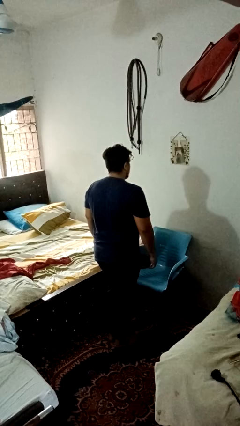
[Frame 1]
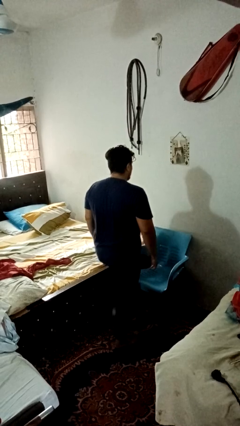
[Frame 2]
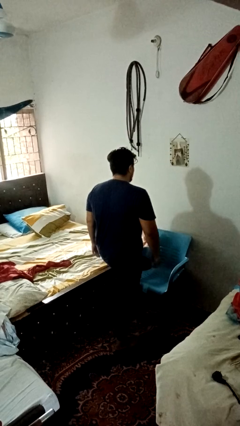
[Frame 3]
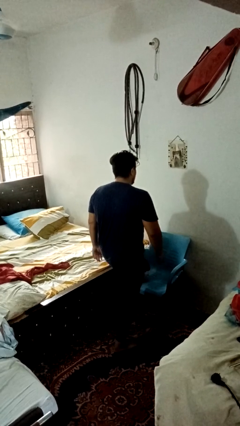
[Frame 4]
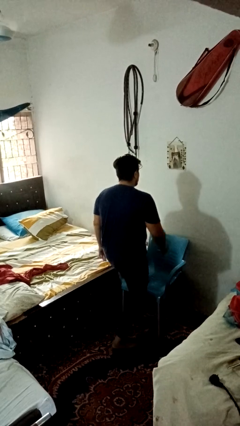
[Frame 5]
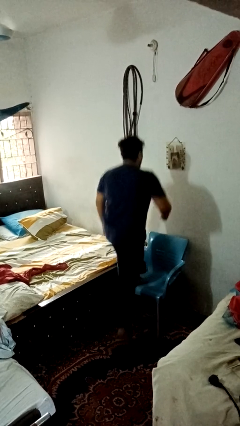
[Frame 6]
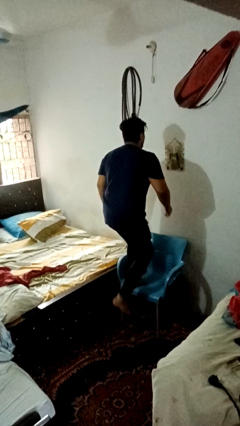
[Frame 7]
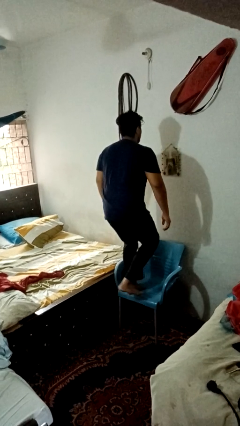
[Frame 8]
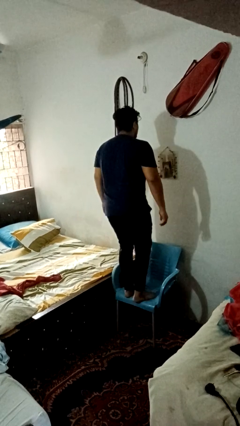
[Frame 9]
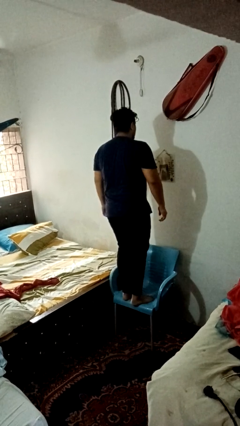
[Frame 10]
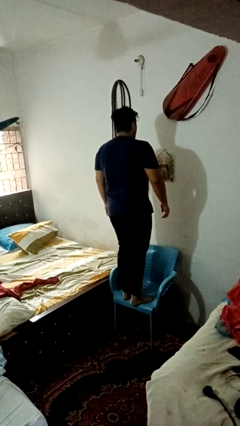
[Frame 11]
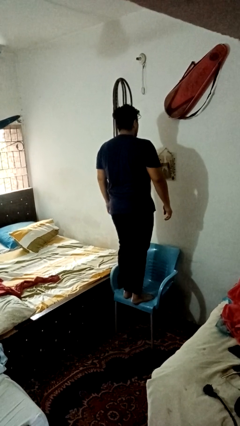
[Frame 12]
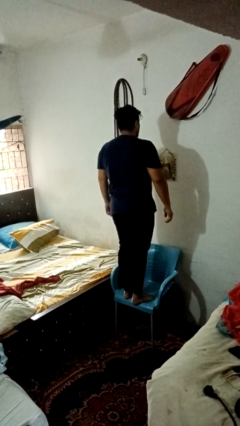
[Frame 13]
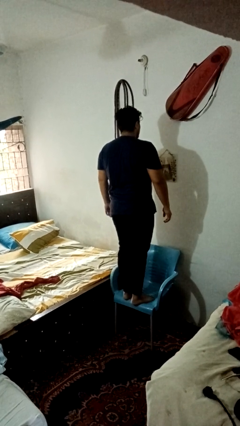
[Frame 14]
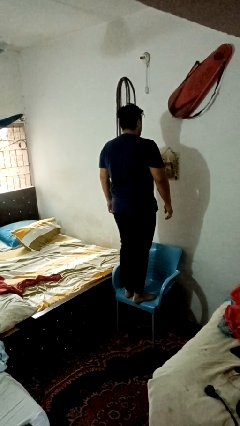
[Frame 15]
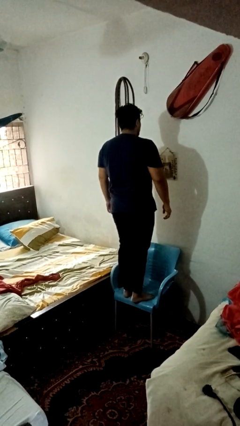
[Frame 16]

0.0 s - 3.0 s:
person climbs on chair

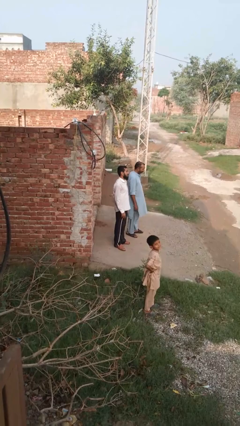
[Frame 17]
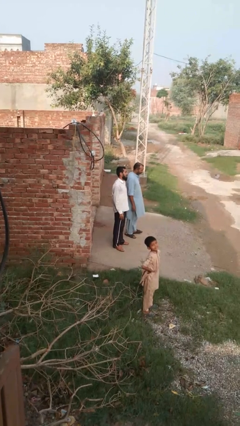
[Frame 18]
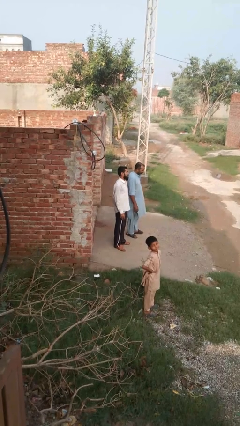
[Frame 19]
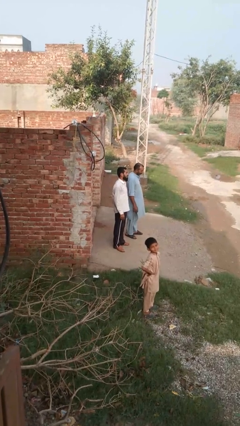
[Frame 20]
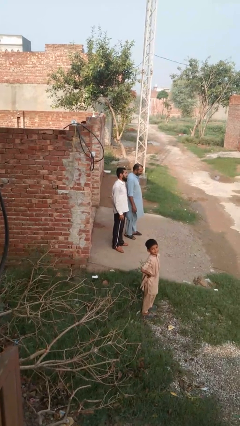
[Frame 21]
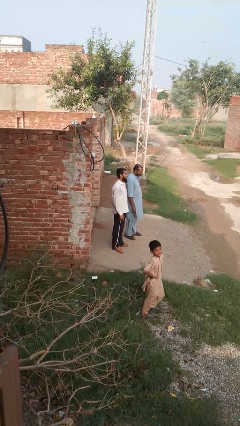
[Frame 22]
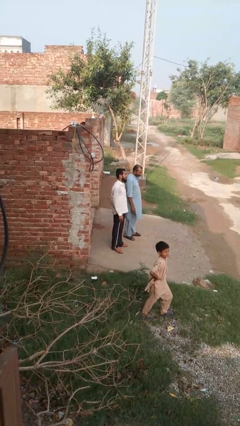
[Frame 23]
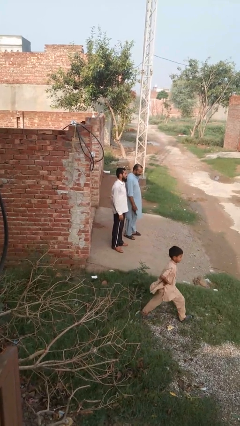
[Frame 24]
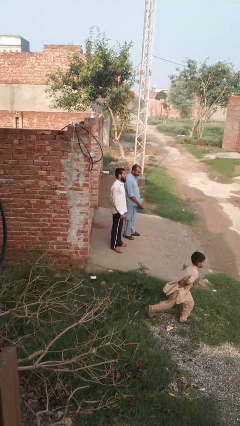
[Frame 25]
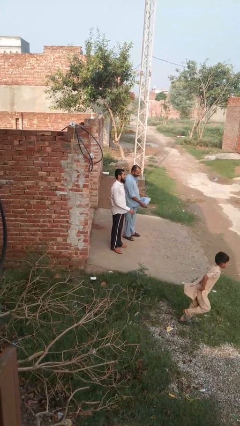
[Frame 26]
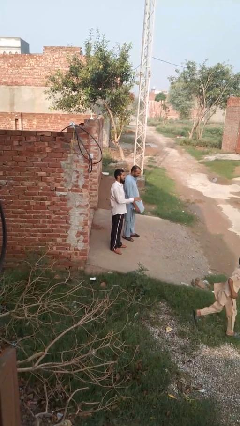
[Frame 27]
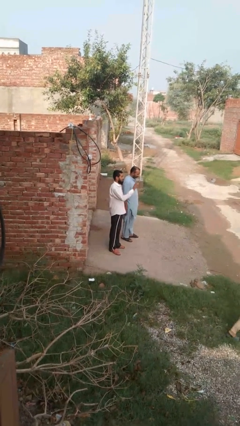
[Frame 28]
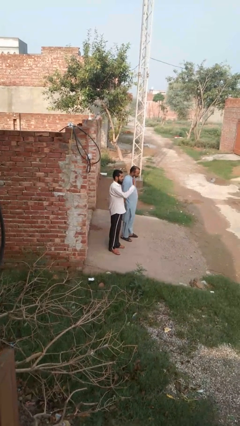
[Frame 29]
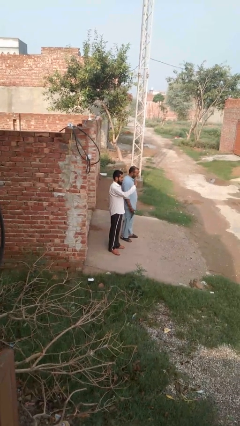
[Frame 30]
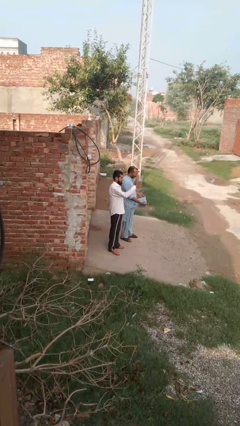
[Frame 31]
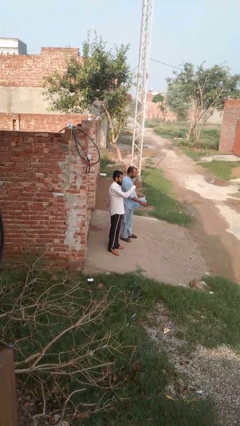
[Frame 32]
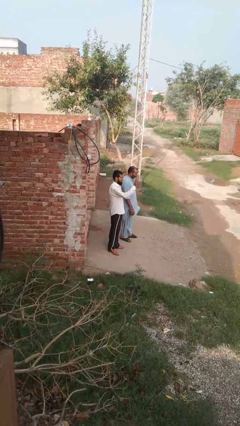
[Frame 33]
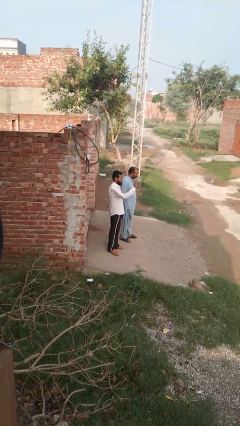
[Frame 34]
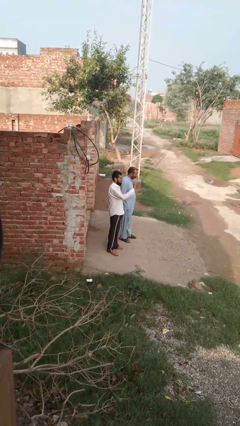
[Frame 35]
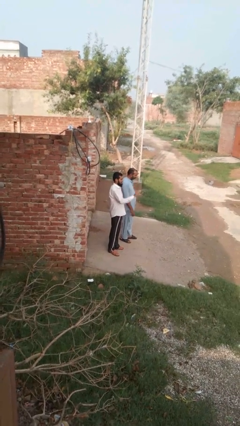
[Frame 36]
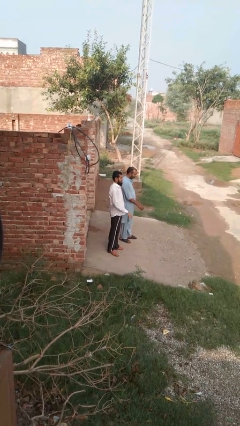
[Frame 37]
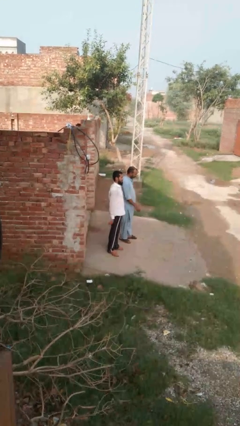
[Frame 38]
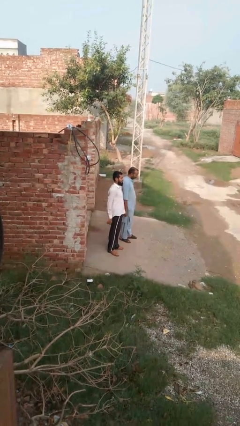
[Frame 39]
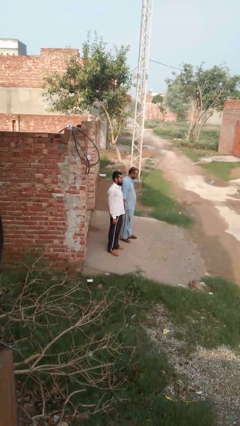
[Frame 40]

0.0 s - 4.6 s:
person waves at person

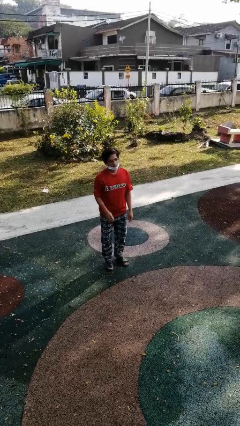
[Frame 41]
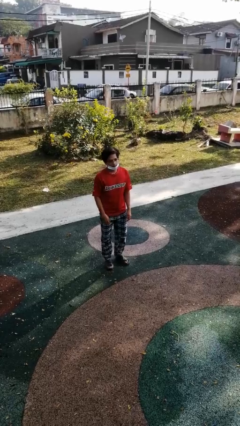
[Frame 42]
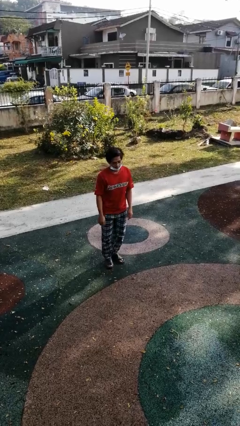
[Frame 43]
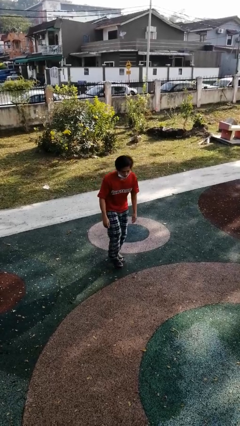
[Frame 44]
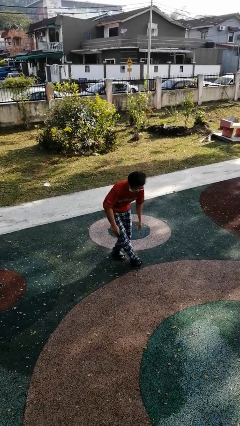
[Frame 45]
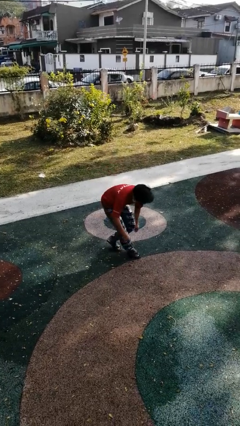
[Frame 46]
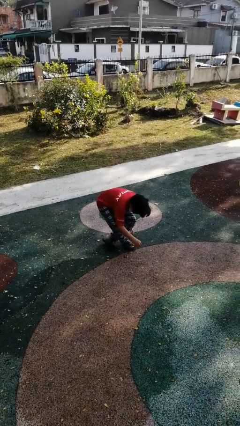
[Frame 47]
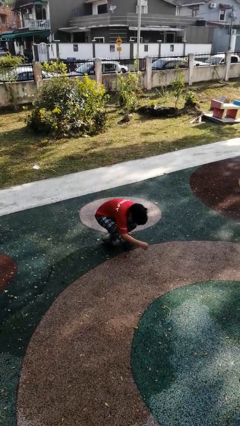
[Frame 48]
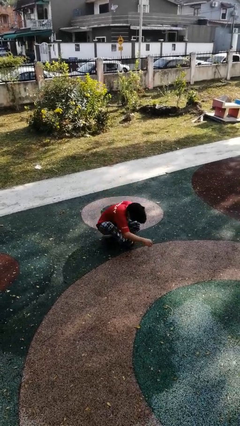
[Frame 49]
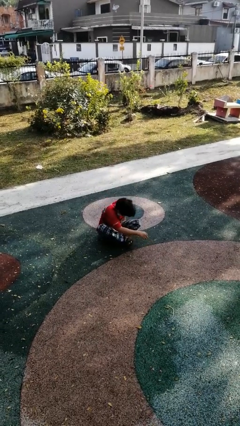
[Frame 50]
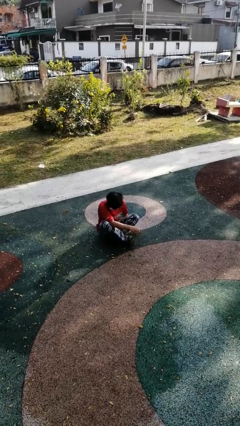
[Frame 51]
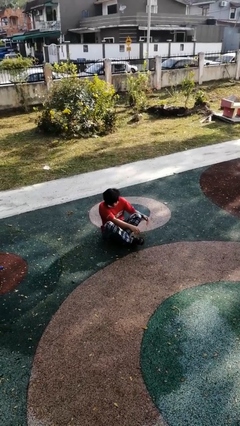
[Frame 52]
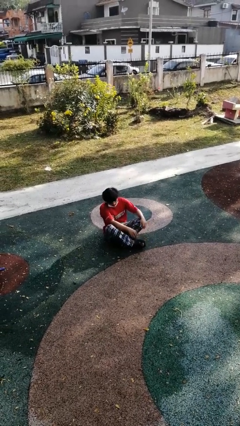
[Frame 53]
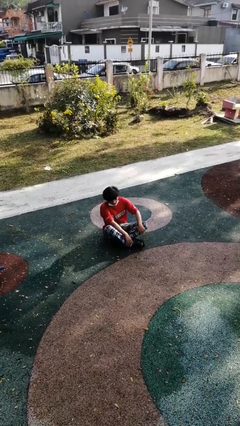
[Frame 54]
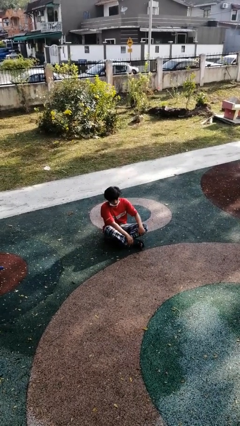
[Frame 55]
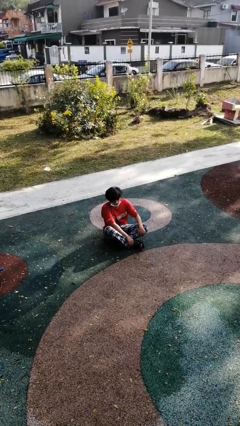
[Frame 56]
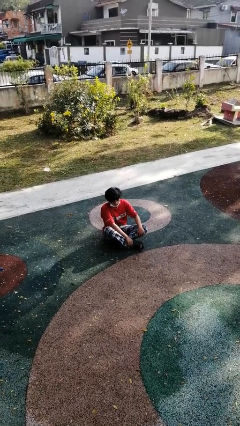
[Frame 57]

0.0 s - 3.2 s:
person sits crisscross

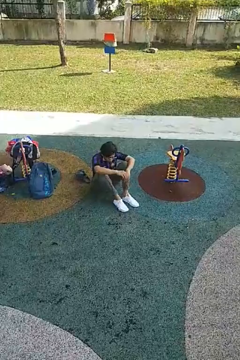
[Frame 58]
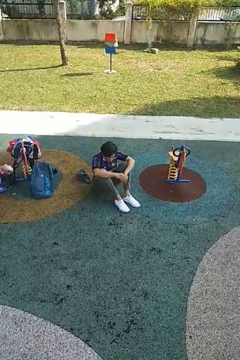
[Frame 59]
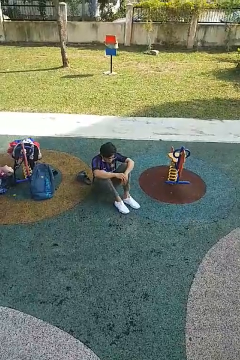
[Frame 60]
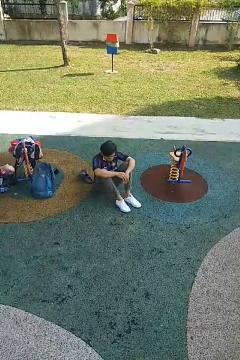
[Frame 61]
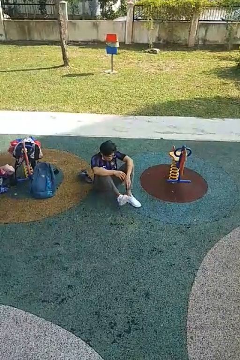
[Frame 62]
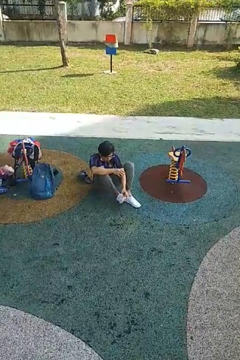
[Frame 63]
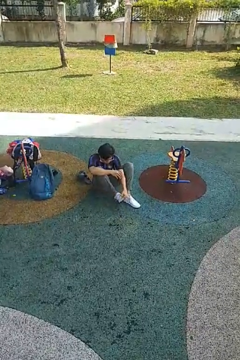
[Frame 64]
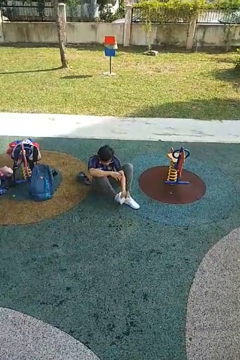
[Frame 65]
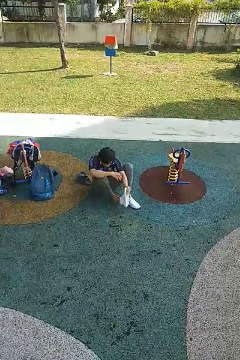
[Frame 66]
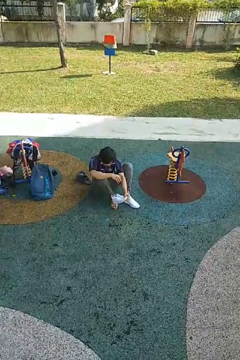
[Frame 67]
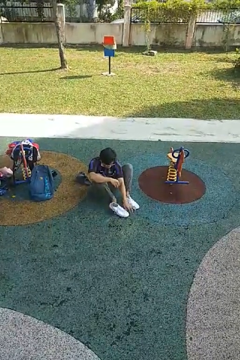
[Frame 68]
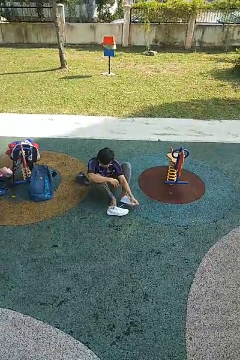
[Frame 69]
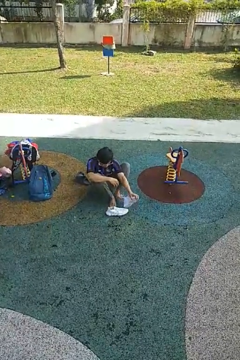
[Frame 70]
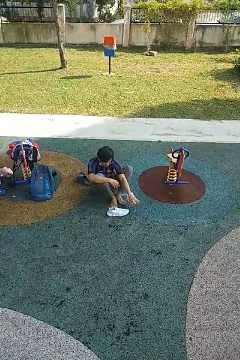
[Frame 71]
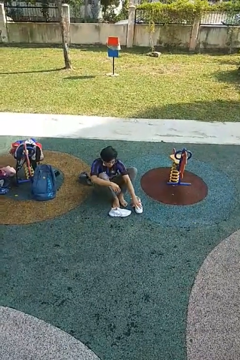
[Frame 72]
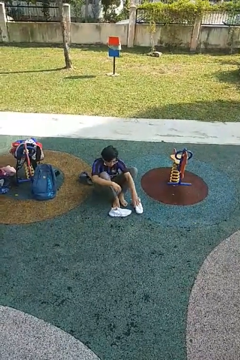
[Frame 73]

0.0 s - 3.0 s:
person takes off shoes

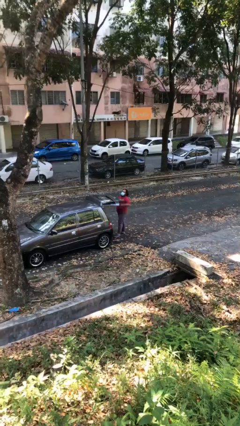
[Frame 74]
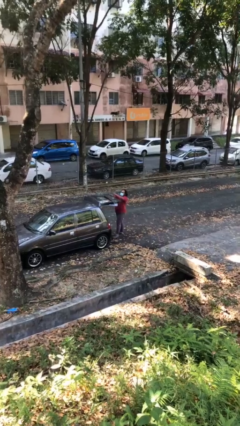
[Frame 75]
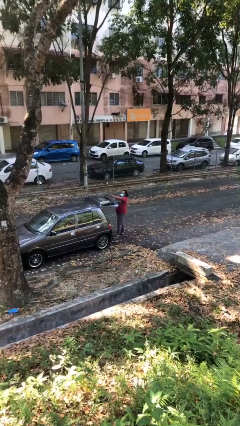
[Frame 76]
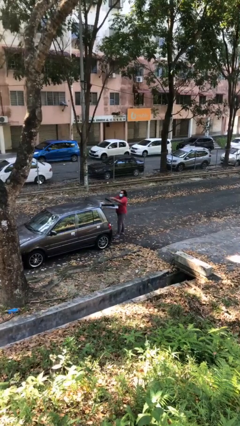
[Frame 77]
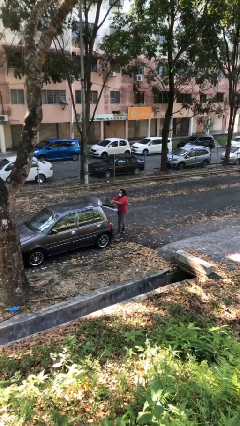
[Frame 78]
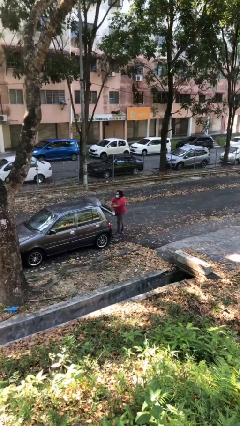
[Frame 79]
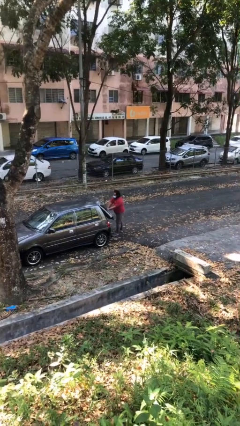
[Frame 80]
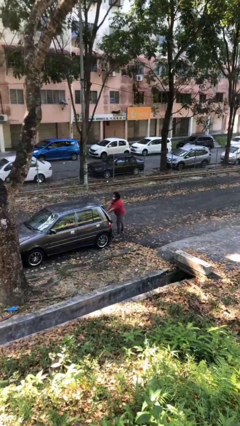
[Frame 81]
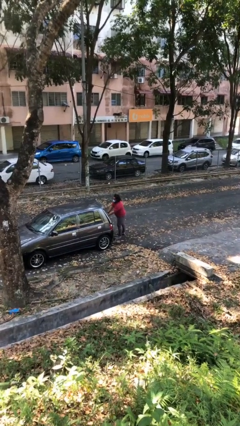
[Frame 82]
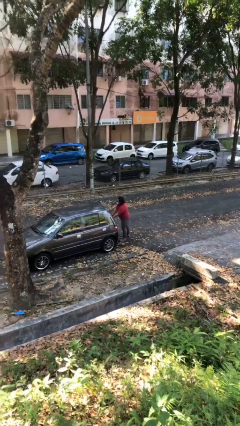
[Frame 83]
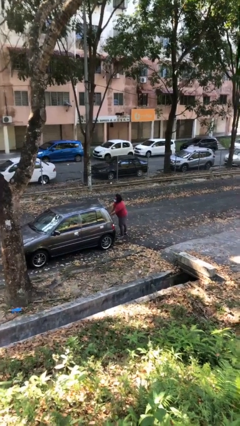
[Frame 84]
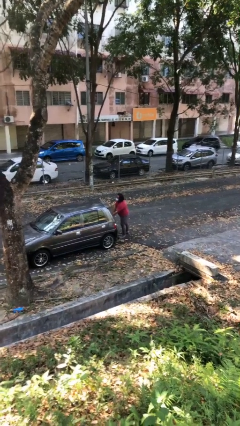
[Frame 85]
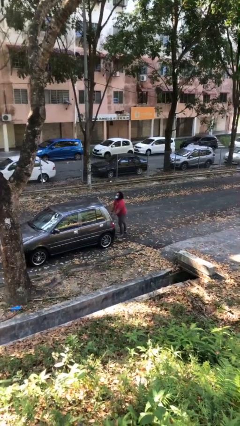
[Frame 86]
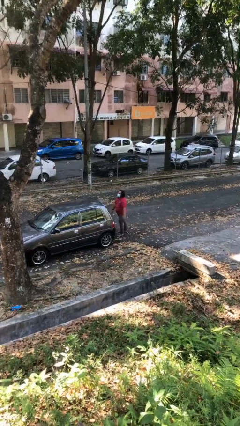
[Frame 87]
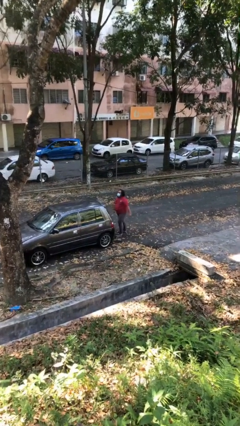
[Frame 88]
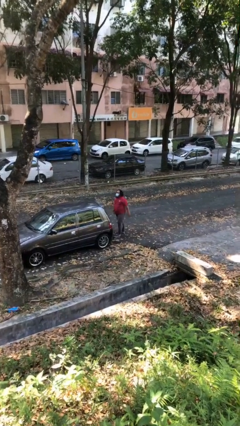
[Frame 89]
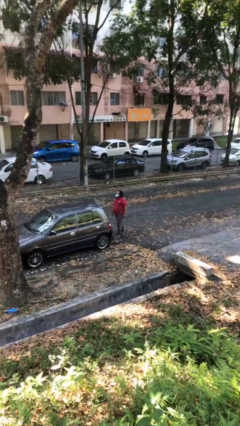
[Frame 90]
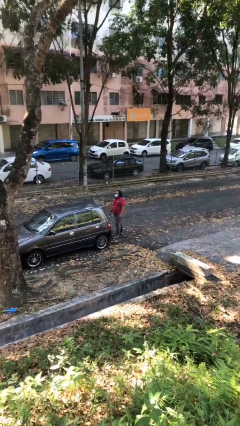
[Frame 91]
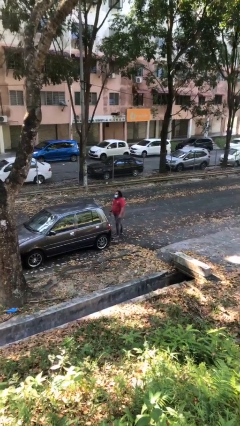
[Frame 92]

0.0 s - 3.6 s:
person closes car trunk

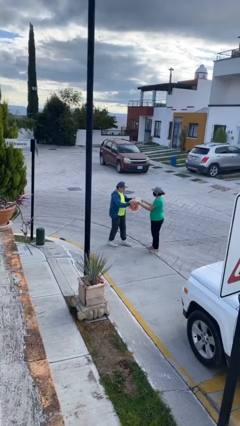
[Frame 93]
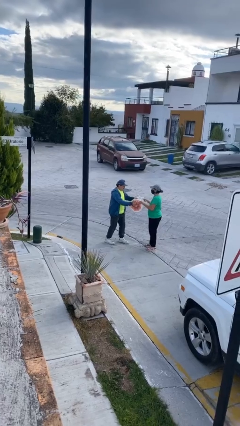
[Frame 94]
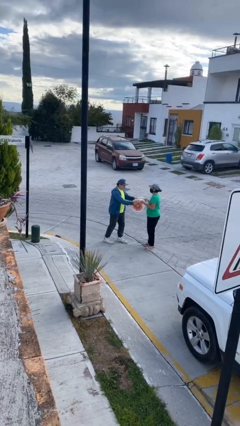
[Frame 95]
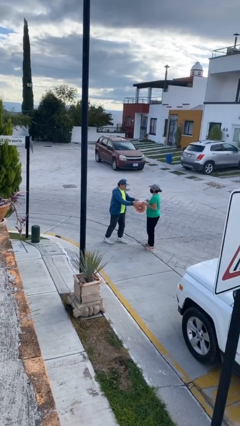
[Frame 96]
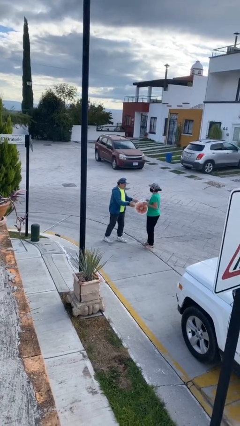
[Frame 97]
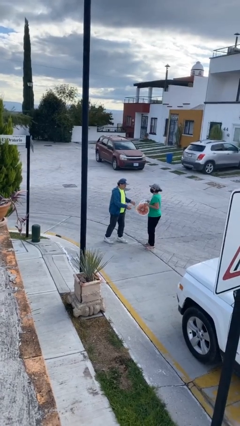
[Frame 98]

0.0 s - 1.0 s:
person transfers object to person
